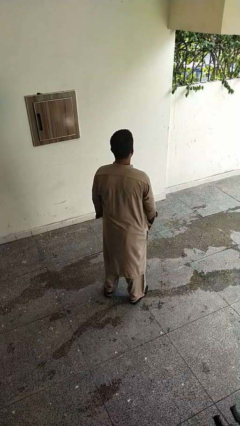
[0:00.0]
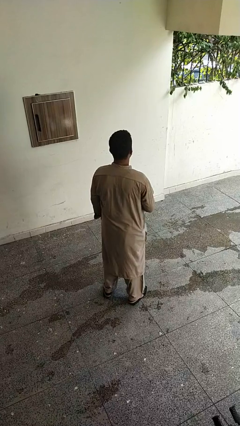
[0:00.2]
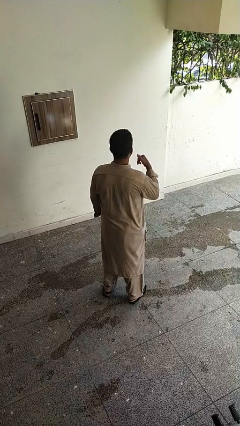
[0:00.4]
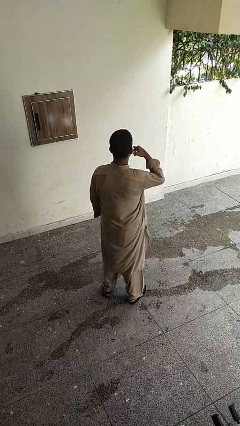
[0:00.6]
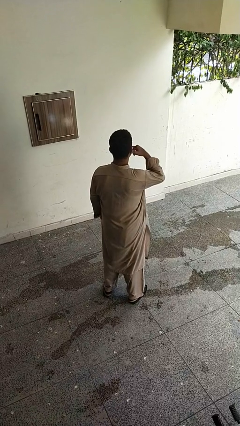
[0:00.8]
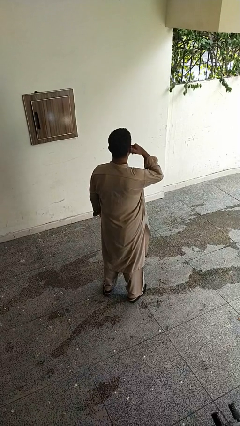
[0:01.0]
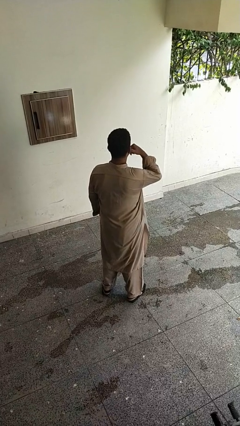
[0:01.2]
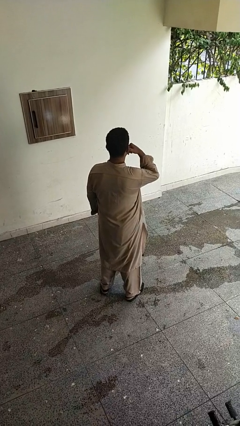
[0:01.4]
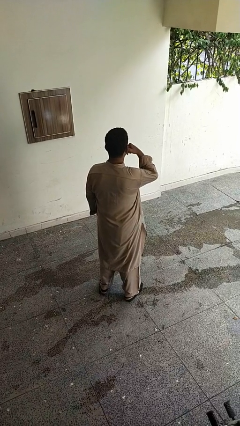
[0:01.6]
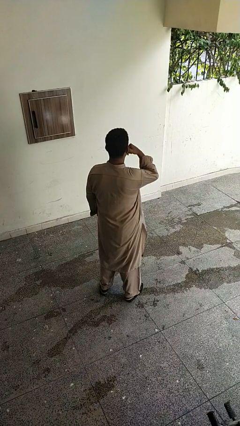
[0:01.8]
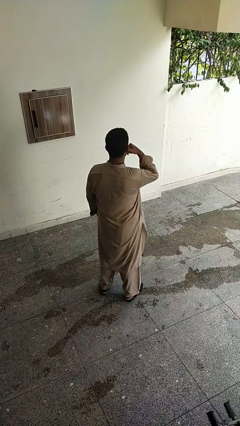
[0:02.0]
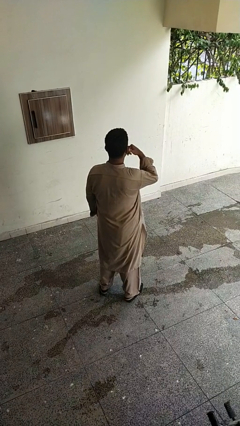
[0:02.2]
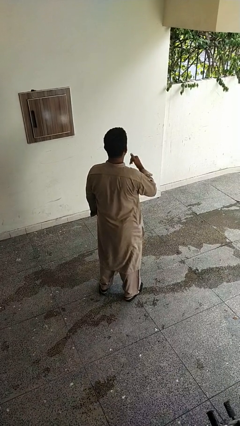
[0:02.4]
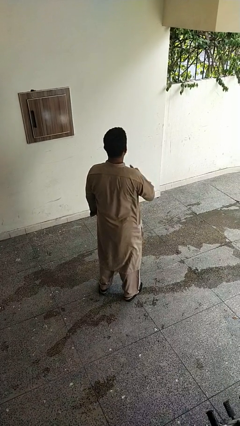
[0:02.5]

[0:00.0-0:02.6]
person gestures call me

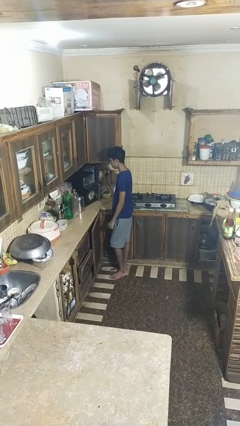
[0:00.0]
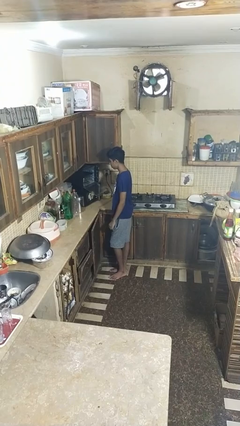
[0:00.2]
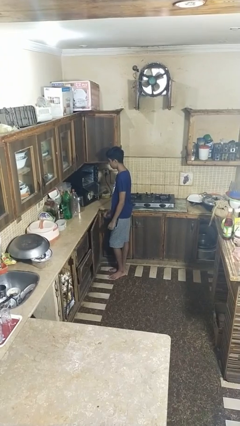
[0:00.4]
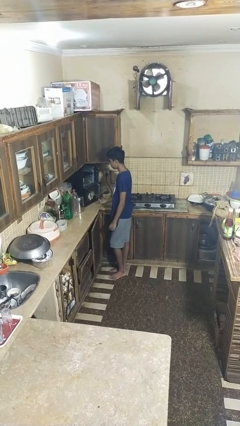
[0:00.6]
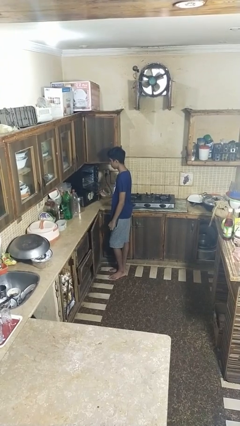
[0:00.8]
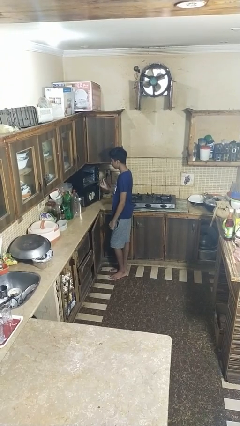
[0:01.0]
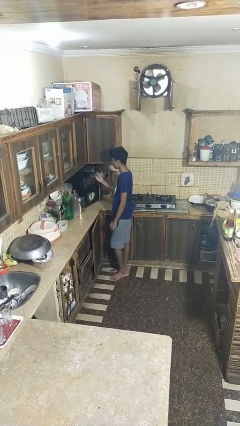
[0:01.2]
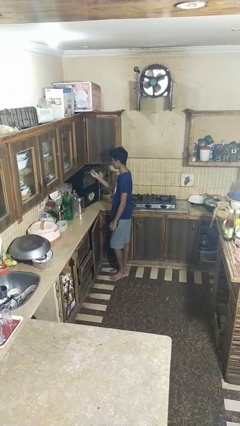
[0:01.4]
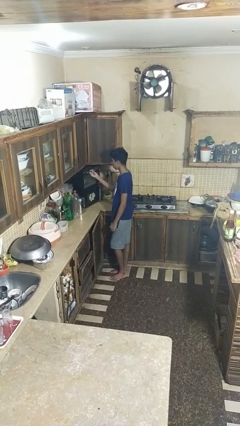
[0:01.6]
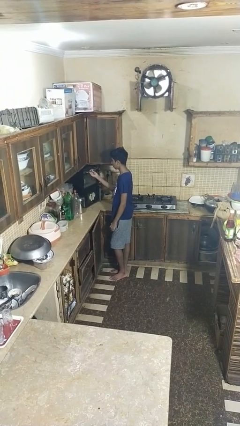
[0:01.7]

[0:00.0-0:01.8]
person closes oven door

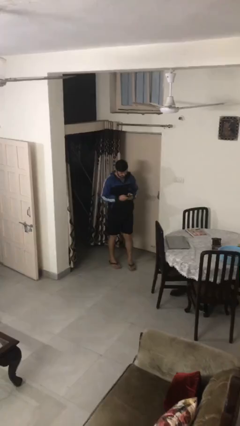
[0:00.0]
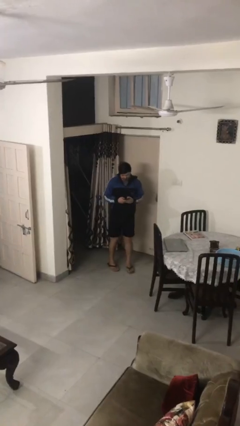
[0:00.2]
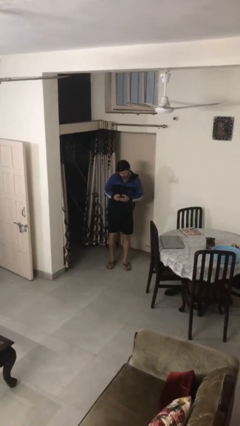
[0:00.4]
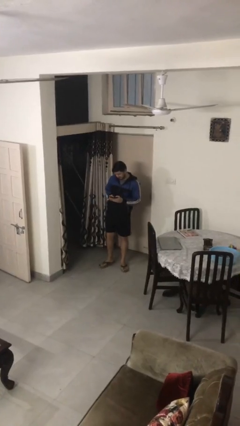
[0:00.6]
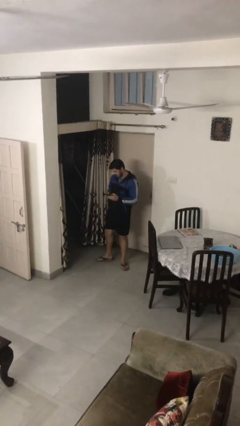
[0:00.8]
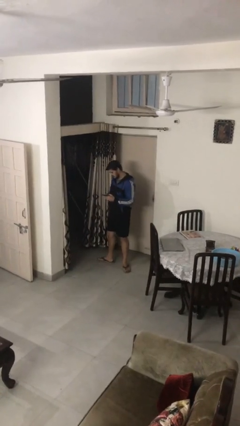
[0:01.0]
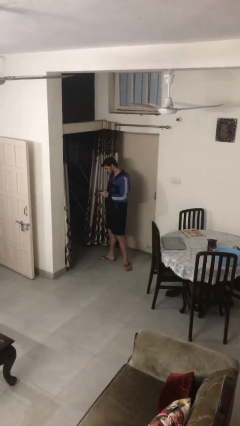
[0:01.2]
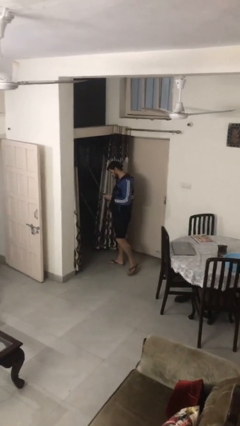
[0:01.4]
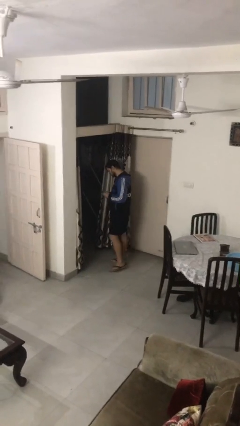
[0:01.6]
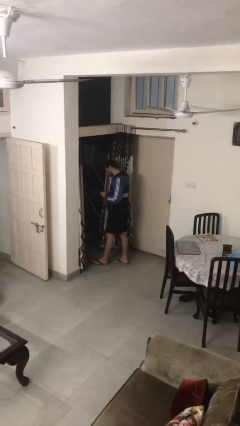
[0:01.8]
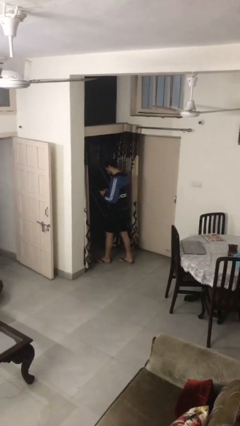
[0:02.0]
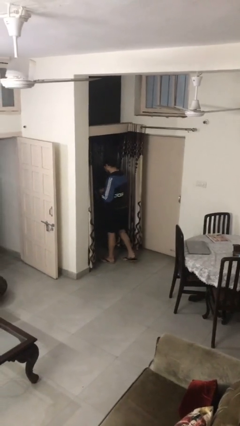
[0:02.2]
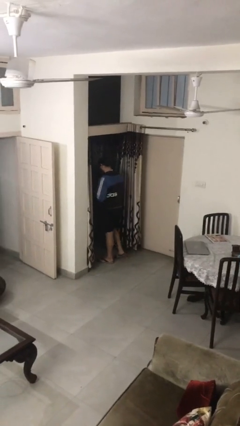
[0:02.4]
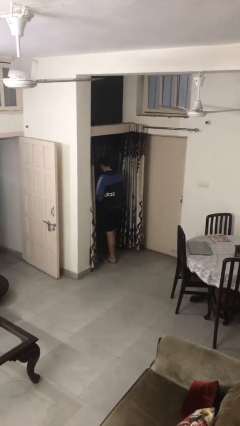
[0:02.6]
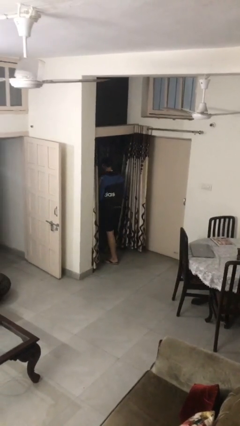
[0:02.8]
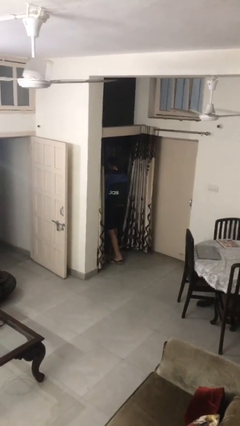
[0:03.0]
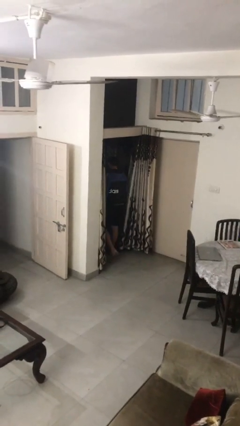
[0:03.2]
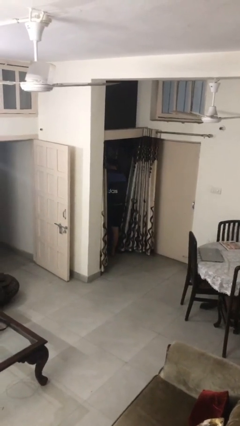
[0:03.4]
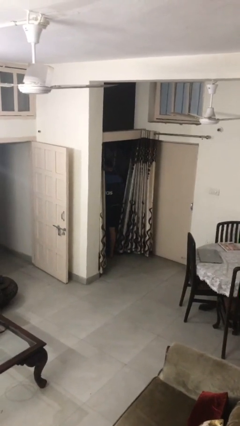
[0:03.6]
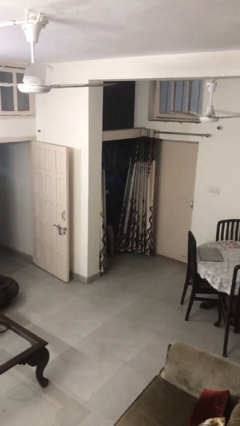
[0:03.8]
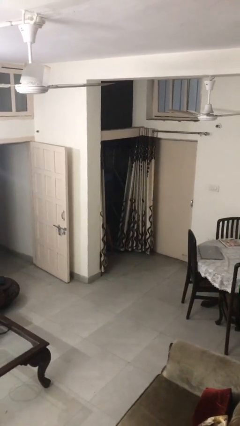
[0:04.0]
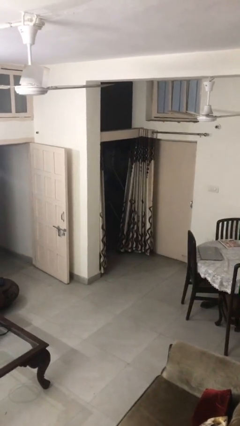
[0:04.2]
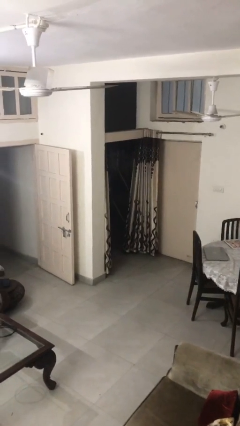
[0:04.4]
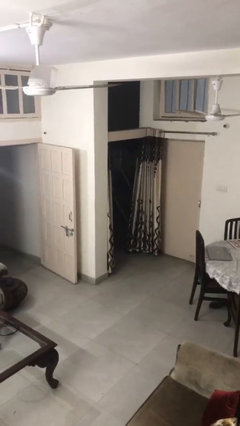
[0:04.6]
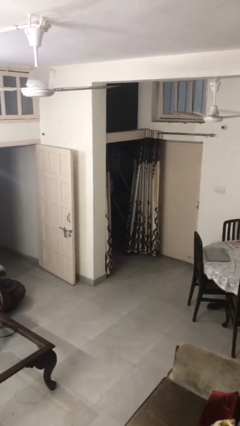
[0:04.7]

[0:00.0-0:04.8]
person exits scene through structure

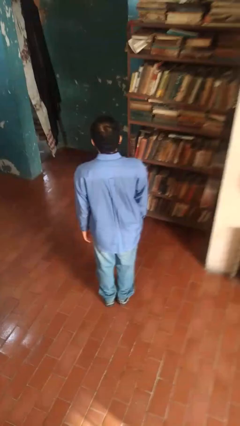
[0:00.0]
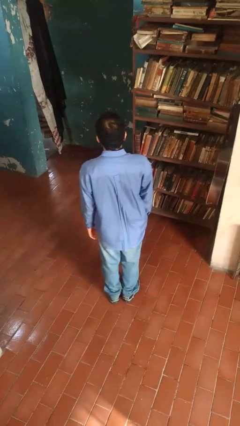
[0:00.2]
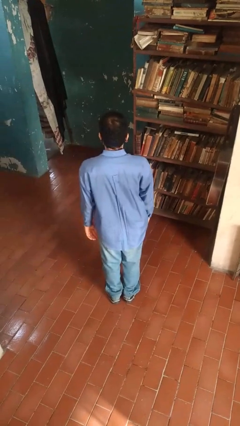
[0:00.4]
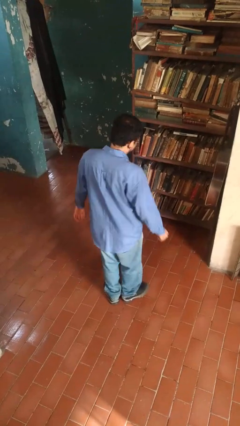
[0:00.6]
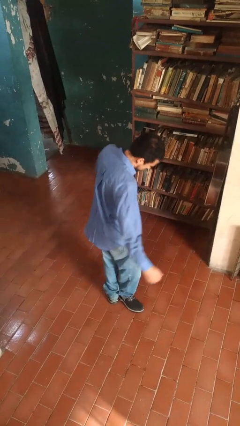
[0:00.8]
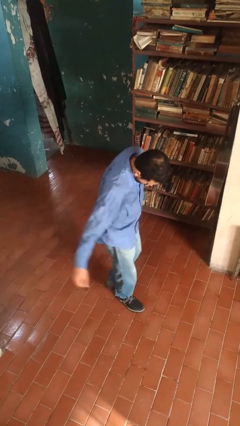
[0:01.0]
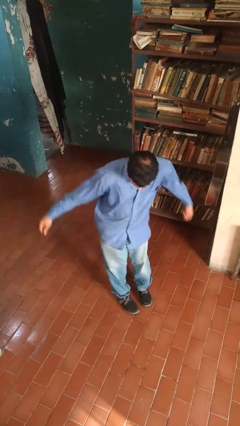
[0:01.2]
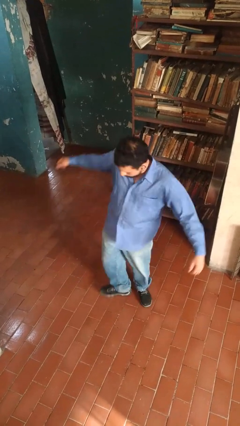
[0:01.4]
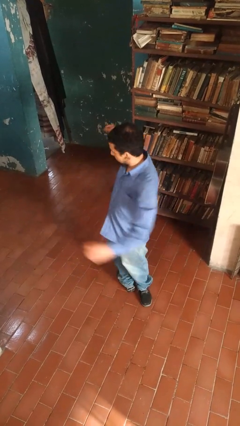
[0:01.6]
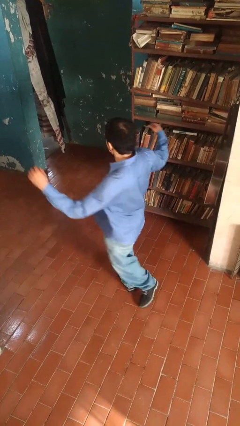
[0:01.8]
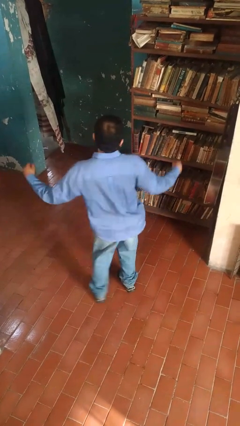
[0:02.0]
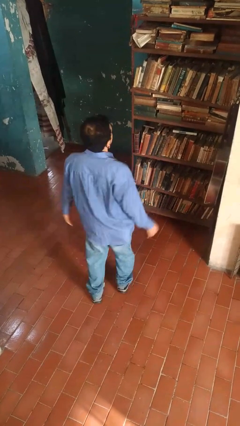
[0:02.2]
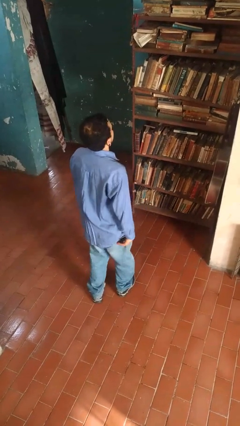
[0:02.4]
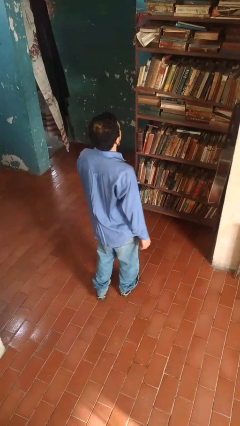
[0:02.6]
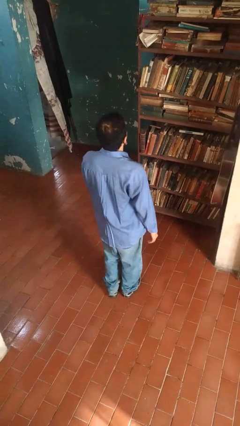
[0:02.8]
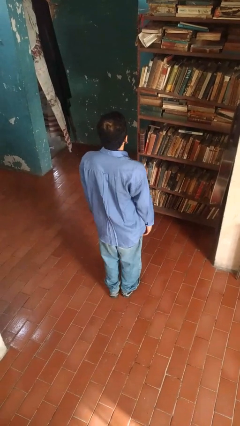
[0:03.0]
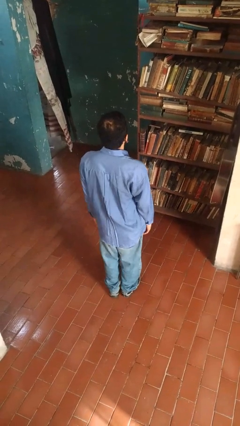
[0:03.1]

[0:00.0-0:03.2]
person twirls

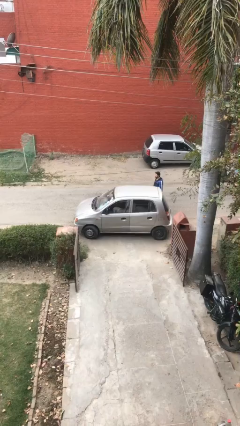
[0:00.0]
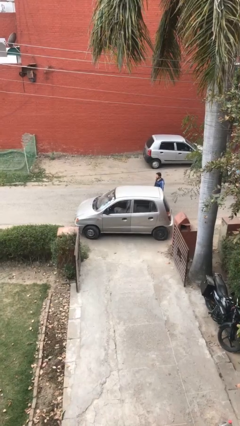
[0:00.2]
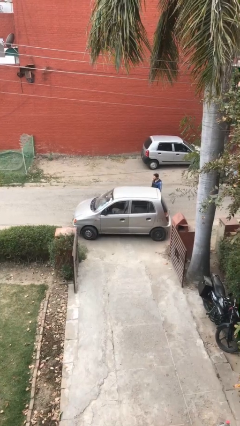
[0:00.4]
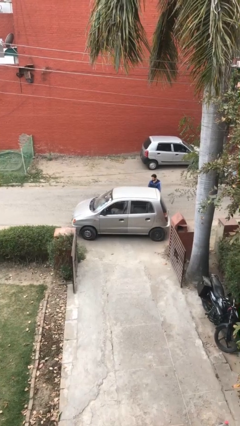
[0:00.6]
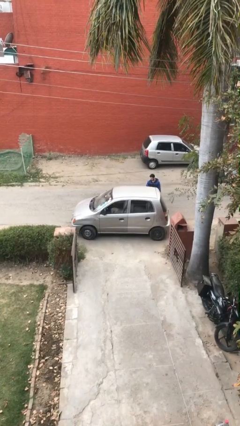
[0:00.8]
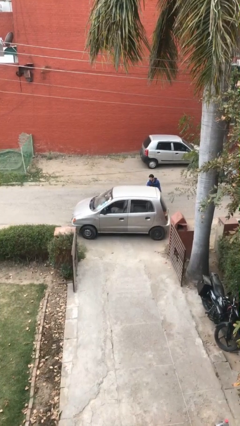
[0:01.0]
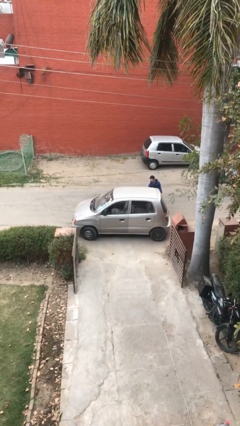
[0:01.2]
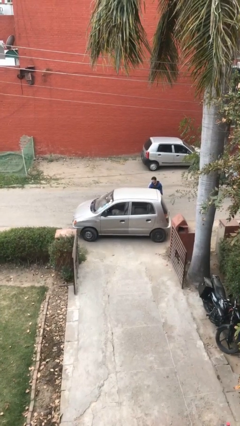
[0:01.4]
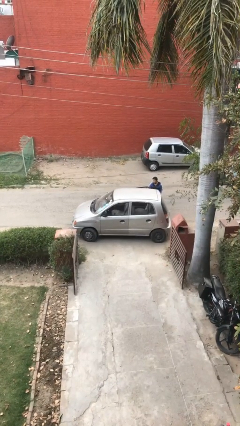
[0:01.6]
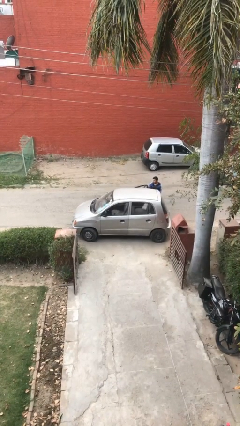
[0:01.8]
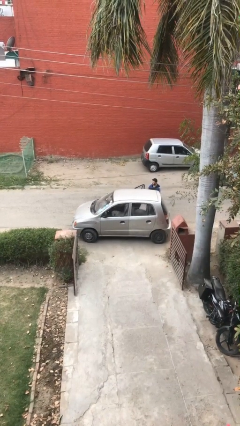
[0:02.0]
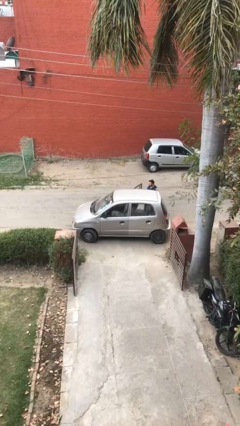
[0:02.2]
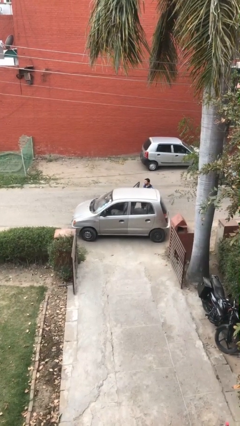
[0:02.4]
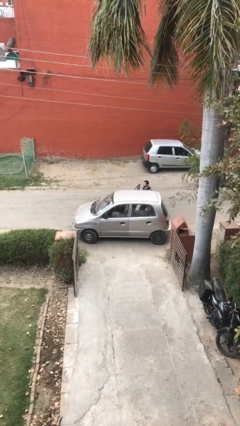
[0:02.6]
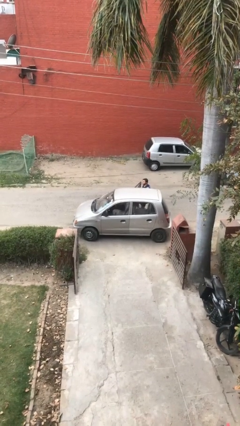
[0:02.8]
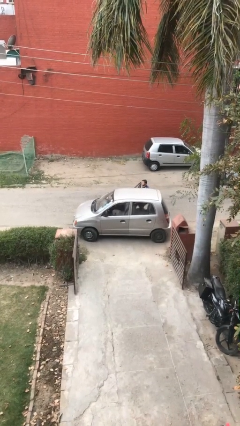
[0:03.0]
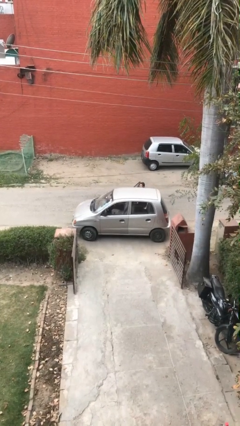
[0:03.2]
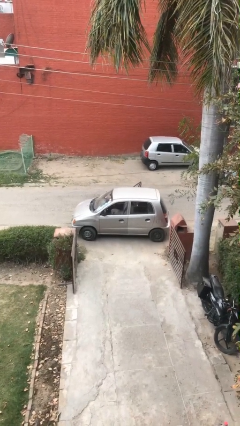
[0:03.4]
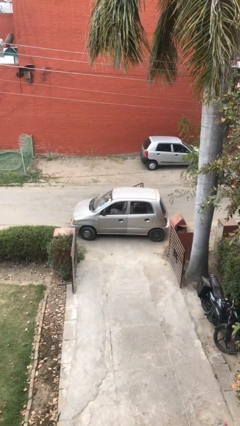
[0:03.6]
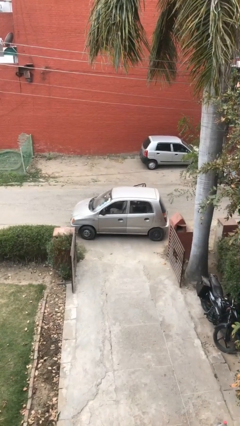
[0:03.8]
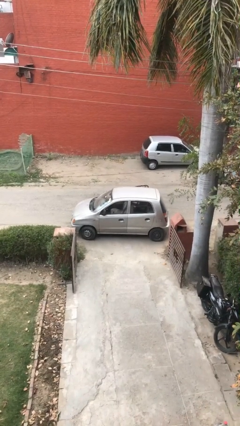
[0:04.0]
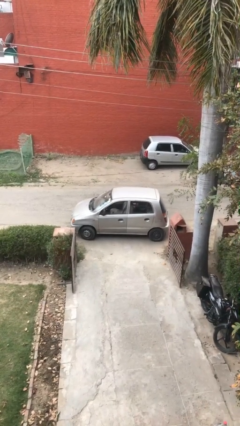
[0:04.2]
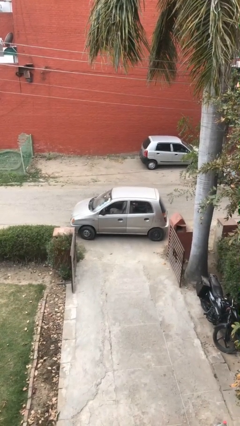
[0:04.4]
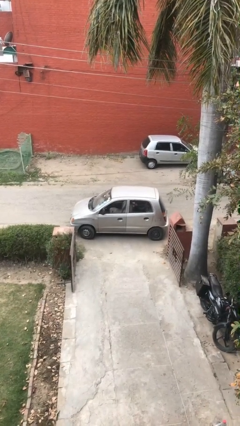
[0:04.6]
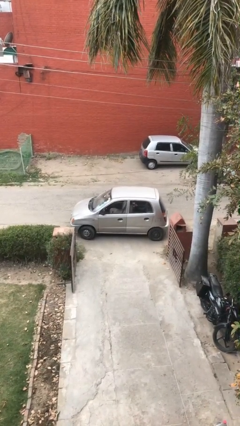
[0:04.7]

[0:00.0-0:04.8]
car picks up person
